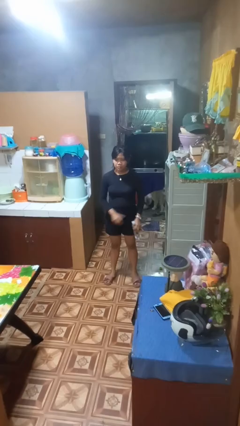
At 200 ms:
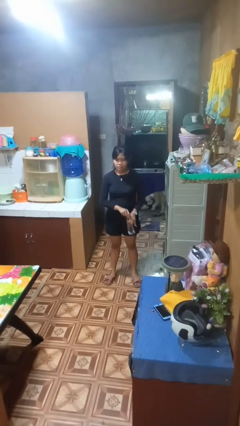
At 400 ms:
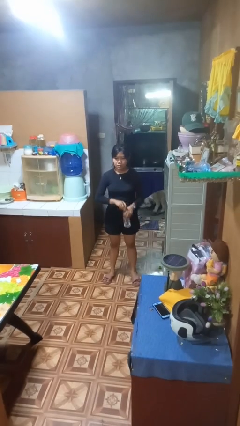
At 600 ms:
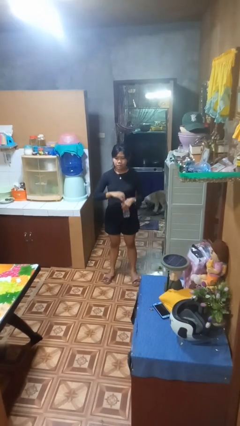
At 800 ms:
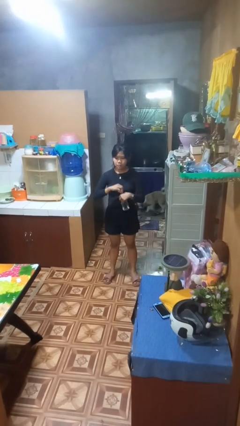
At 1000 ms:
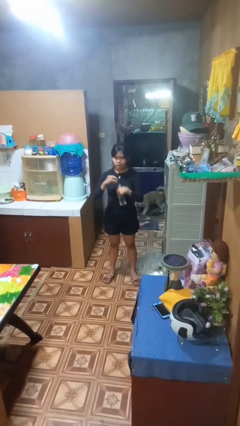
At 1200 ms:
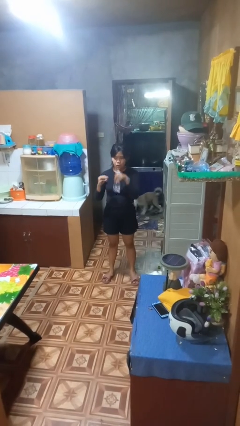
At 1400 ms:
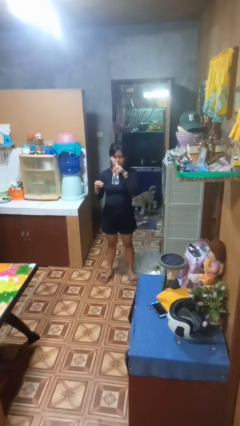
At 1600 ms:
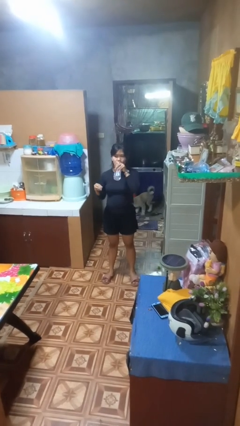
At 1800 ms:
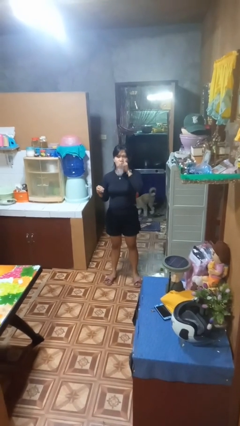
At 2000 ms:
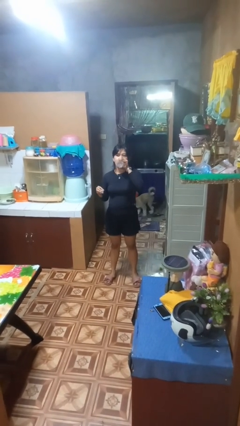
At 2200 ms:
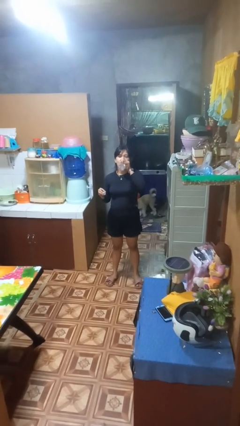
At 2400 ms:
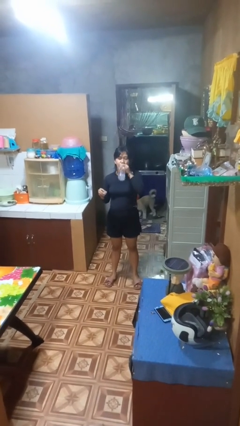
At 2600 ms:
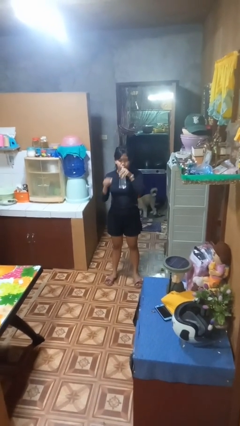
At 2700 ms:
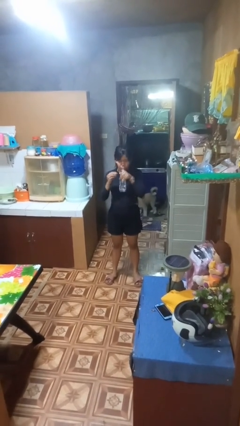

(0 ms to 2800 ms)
person drinks from bottle

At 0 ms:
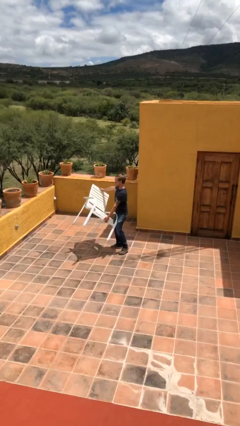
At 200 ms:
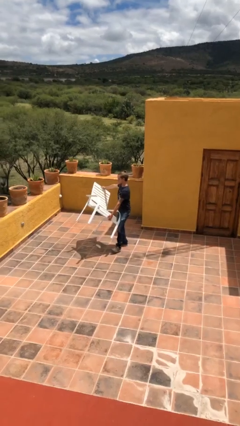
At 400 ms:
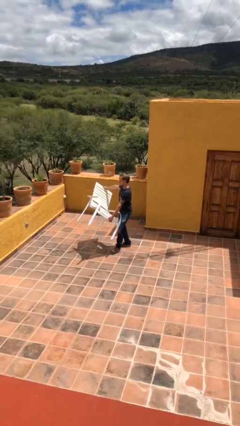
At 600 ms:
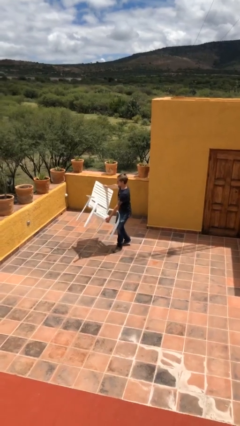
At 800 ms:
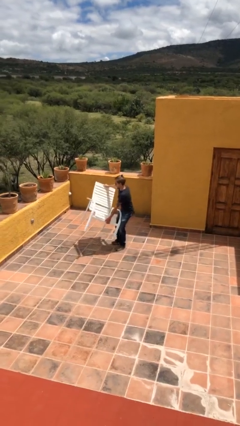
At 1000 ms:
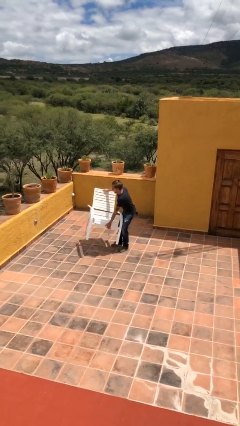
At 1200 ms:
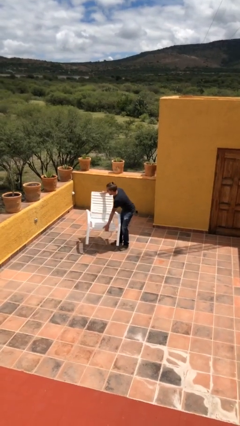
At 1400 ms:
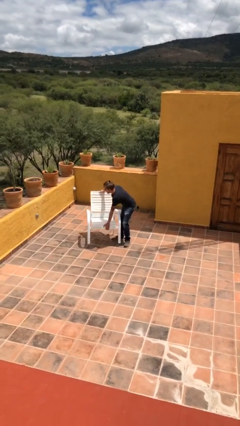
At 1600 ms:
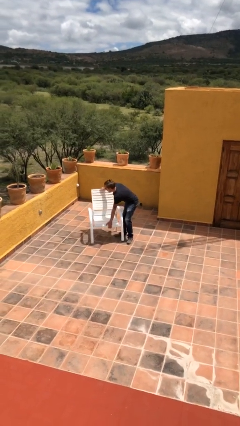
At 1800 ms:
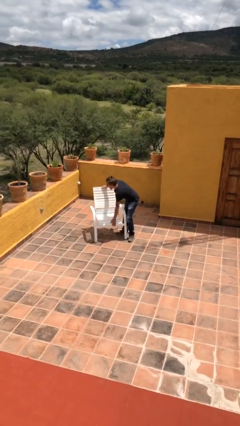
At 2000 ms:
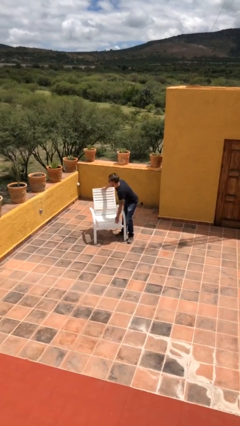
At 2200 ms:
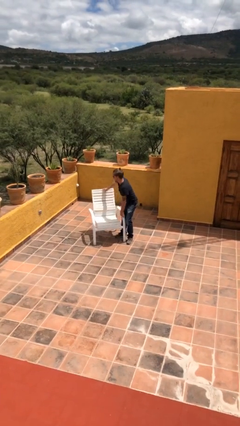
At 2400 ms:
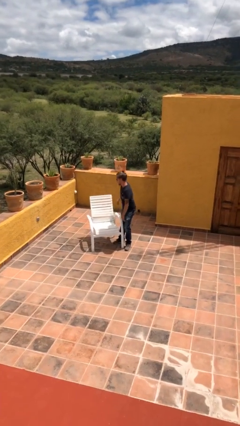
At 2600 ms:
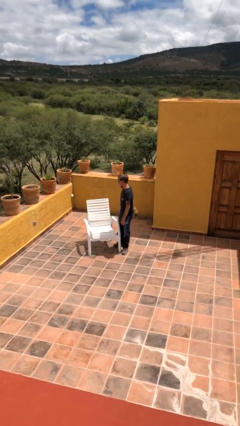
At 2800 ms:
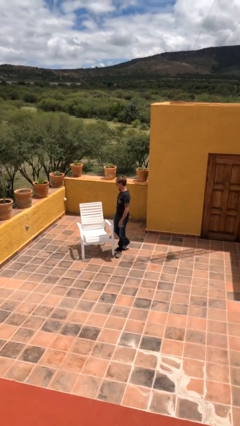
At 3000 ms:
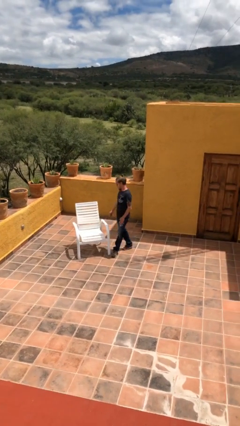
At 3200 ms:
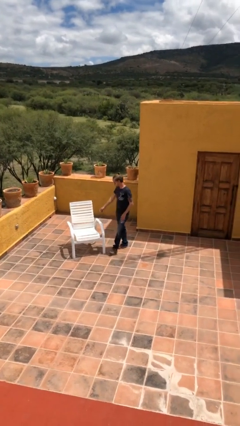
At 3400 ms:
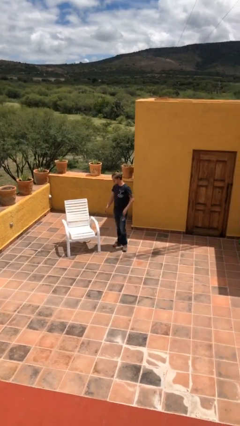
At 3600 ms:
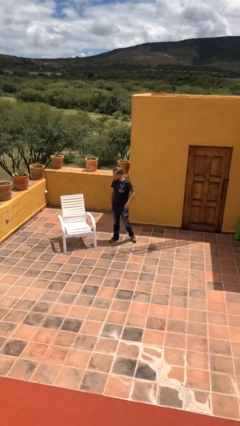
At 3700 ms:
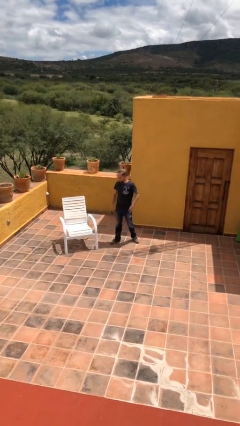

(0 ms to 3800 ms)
person puts down object on floor

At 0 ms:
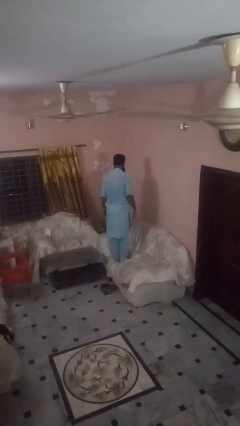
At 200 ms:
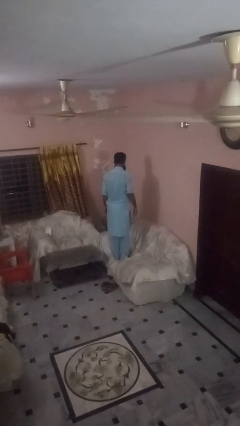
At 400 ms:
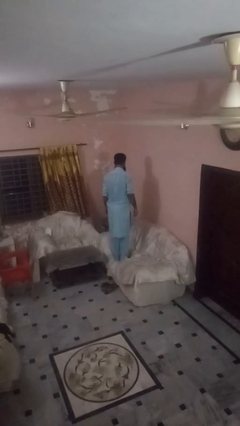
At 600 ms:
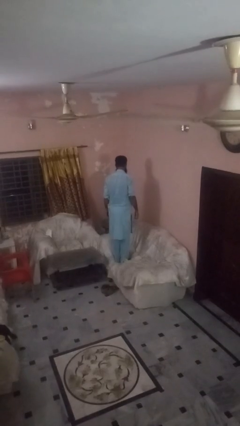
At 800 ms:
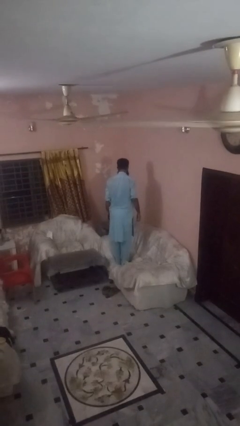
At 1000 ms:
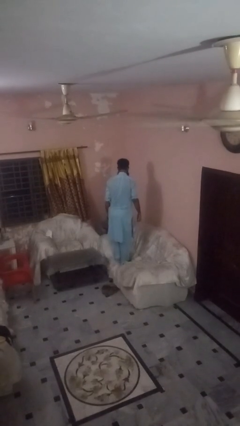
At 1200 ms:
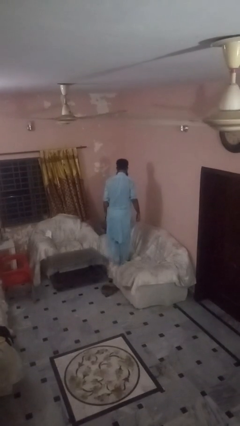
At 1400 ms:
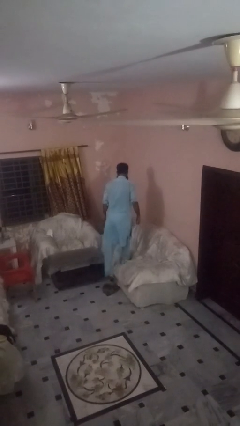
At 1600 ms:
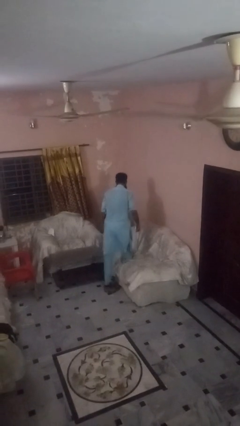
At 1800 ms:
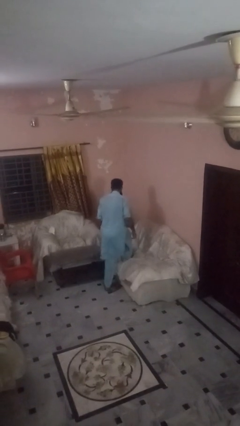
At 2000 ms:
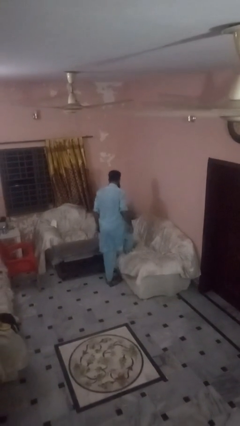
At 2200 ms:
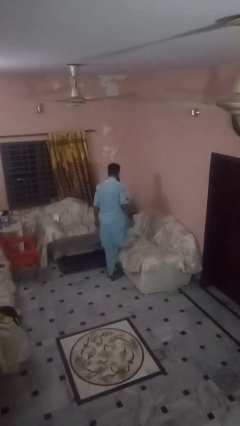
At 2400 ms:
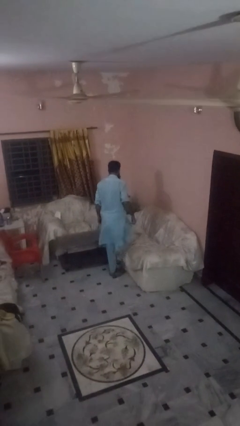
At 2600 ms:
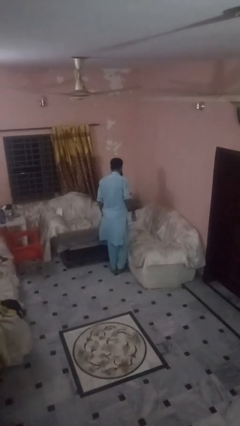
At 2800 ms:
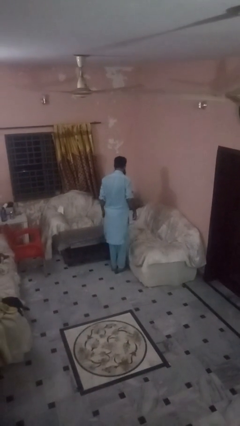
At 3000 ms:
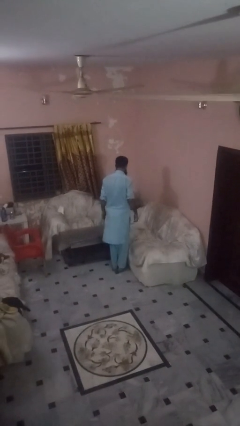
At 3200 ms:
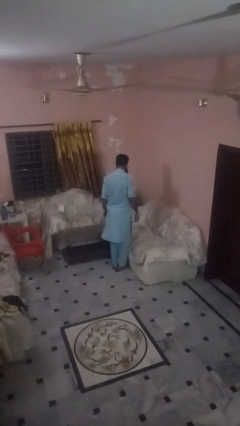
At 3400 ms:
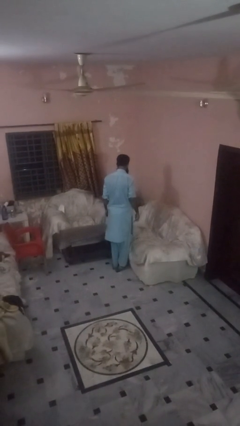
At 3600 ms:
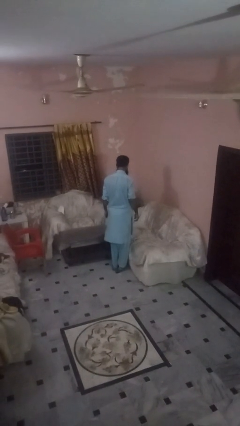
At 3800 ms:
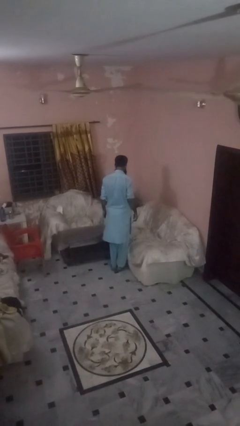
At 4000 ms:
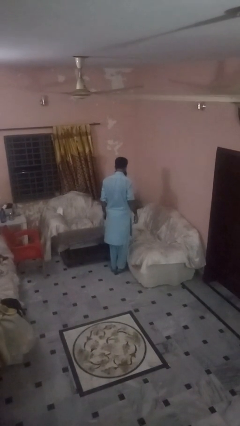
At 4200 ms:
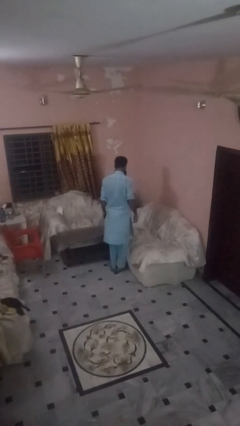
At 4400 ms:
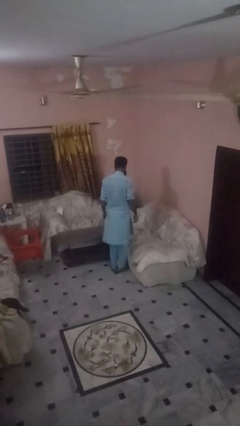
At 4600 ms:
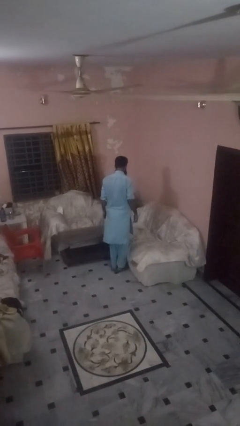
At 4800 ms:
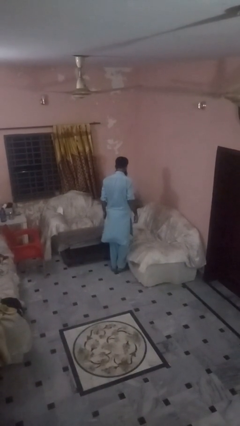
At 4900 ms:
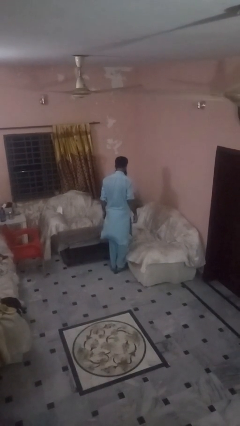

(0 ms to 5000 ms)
person climbs off couch

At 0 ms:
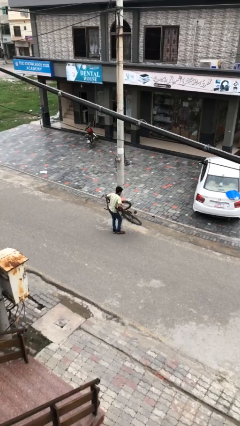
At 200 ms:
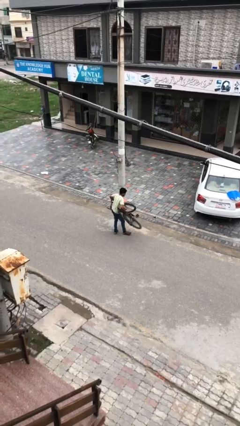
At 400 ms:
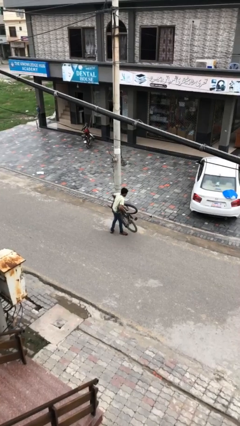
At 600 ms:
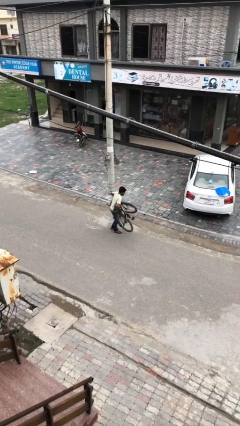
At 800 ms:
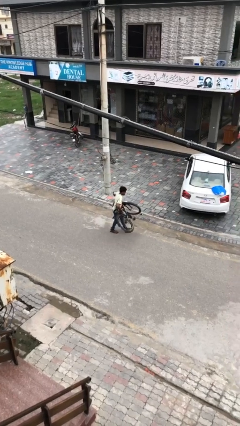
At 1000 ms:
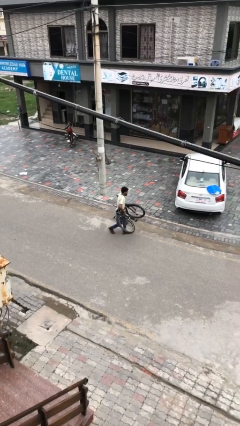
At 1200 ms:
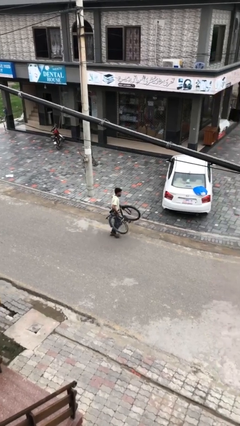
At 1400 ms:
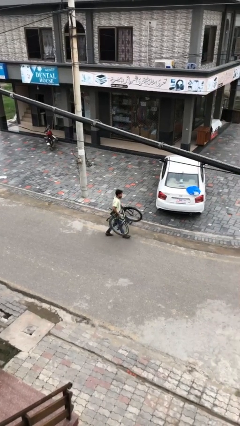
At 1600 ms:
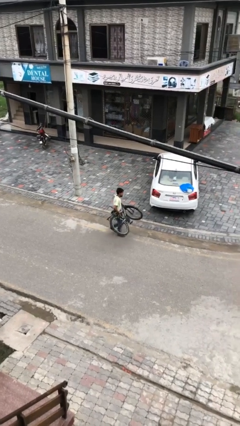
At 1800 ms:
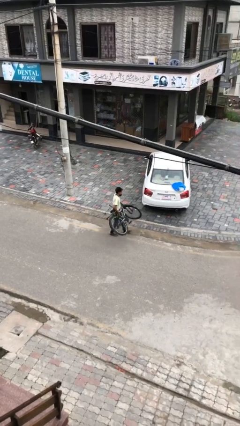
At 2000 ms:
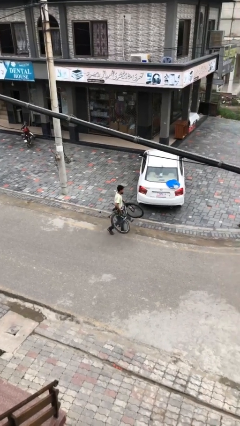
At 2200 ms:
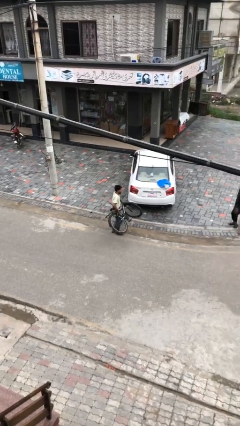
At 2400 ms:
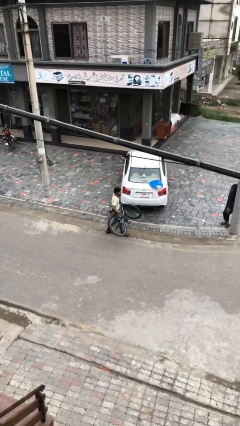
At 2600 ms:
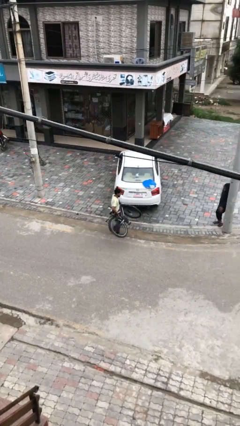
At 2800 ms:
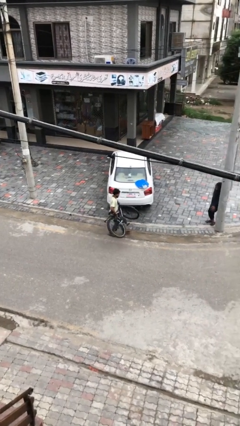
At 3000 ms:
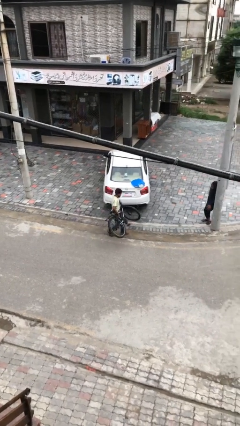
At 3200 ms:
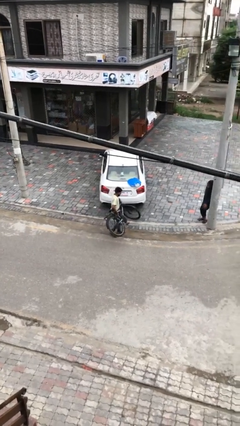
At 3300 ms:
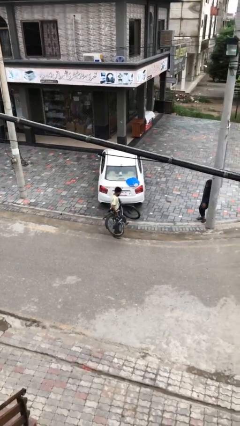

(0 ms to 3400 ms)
person carries heavy object

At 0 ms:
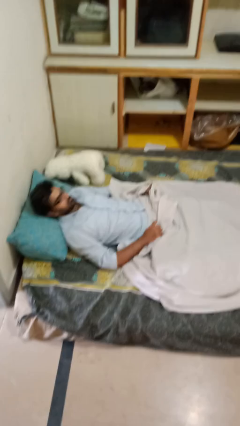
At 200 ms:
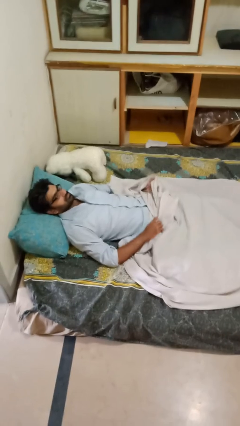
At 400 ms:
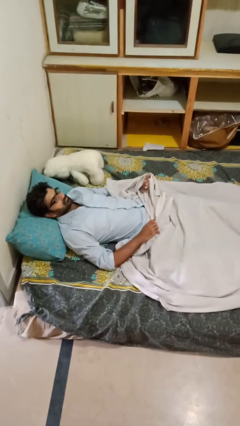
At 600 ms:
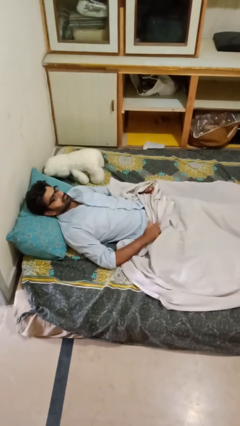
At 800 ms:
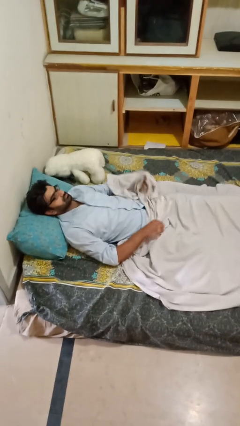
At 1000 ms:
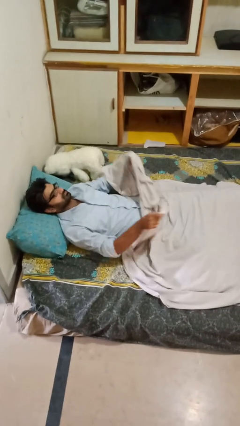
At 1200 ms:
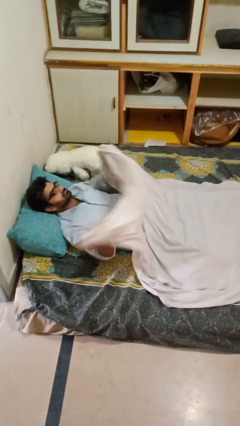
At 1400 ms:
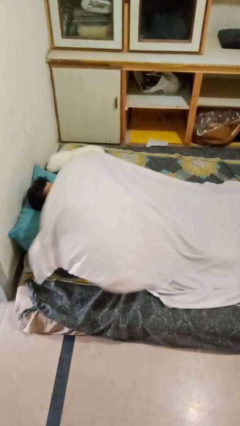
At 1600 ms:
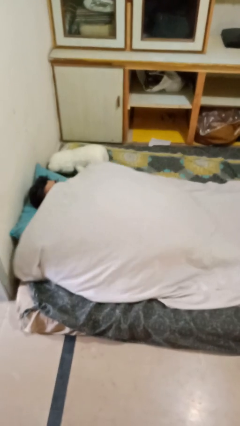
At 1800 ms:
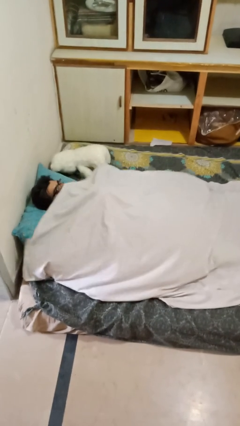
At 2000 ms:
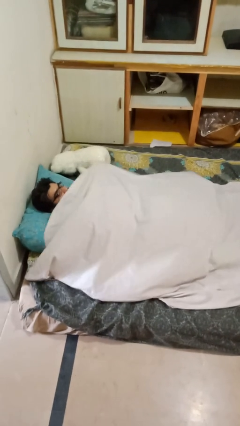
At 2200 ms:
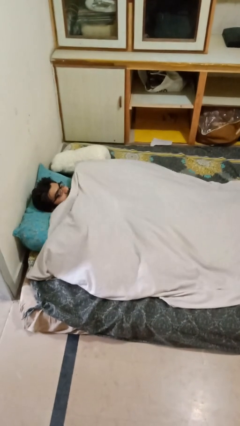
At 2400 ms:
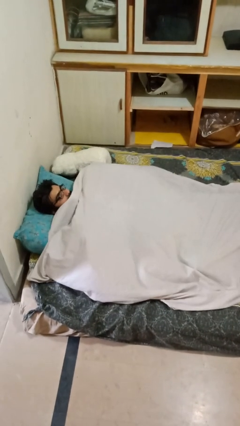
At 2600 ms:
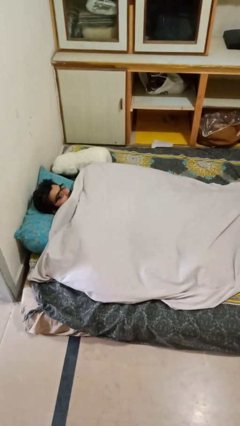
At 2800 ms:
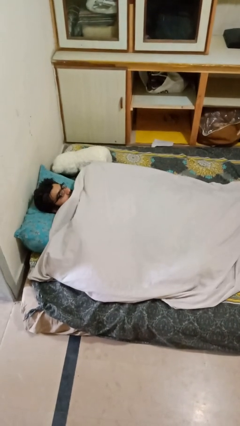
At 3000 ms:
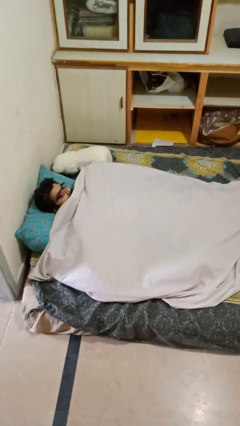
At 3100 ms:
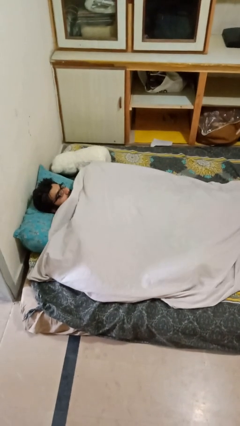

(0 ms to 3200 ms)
person covers with bedsheets
